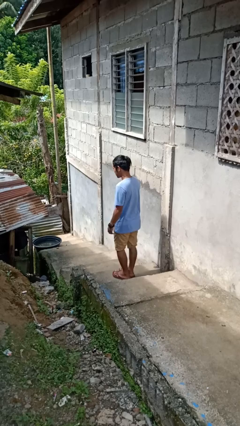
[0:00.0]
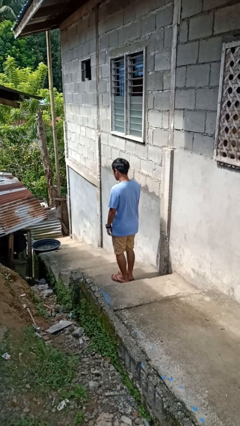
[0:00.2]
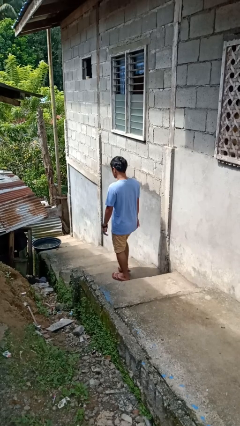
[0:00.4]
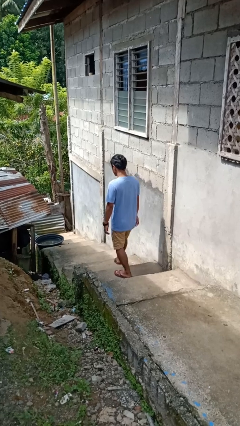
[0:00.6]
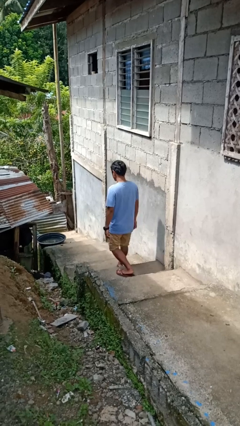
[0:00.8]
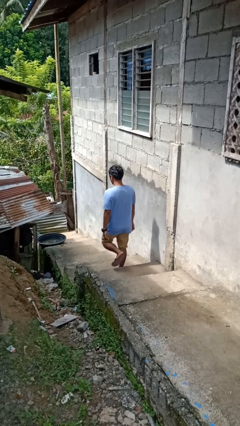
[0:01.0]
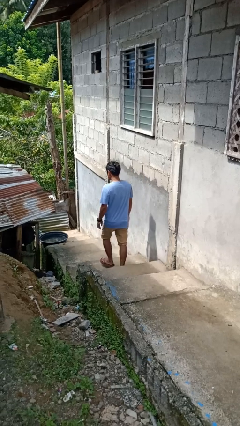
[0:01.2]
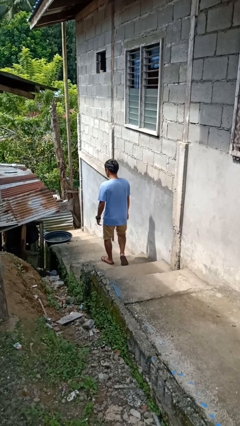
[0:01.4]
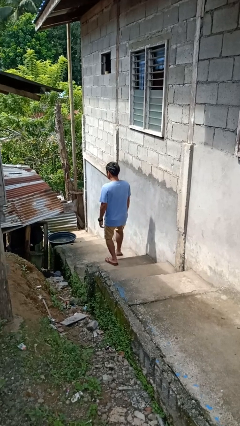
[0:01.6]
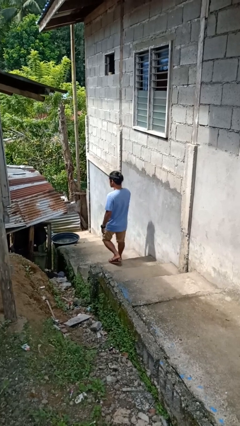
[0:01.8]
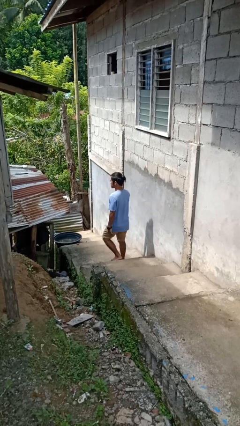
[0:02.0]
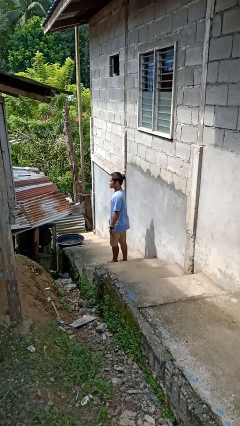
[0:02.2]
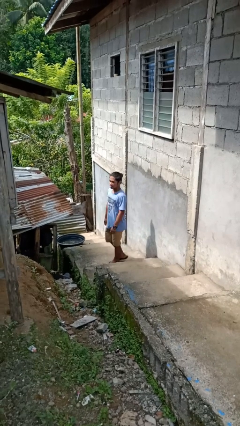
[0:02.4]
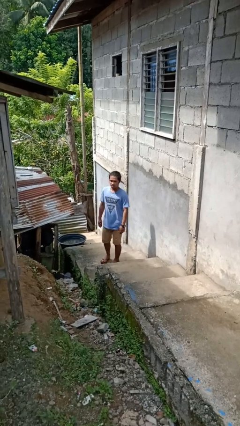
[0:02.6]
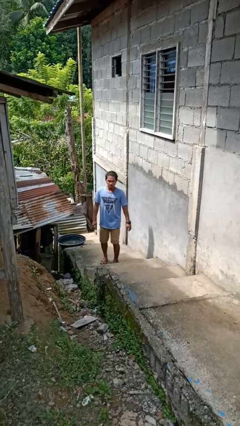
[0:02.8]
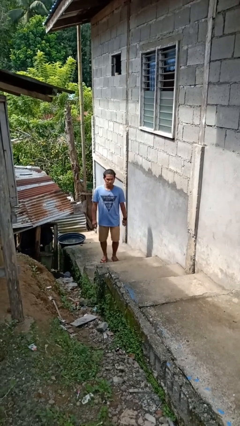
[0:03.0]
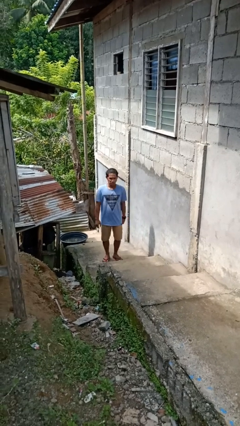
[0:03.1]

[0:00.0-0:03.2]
person climbs down stairs

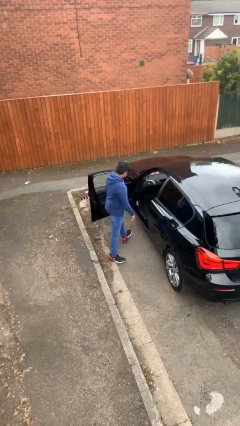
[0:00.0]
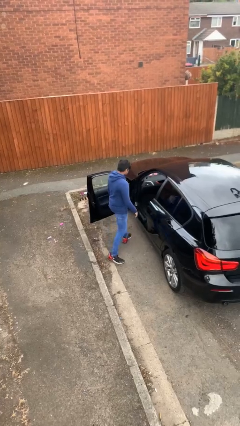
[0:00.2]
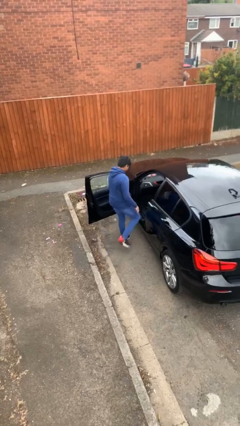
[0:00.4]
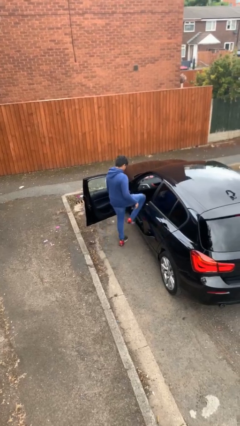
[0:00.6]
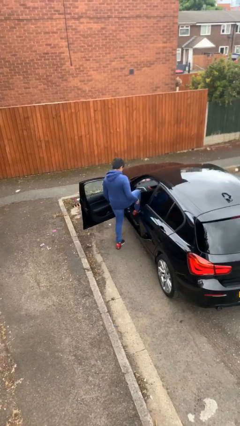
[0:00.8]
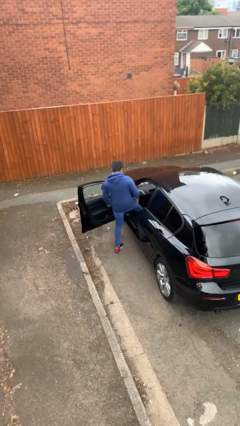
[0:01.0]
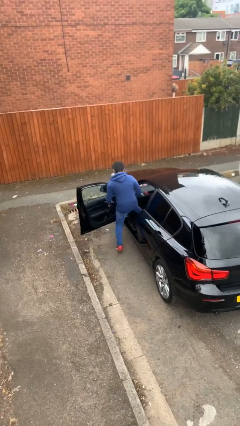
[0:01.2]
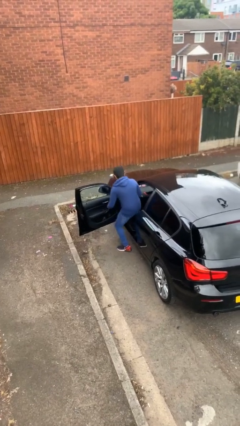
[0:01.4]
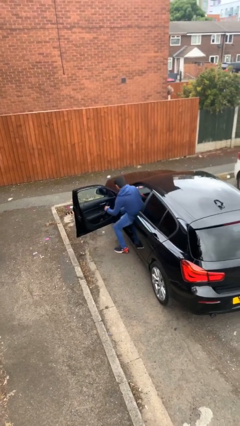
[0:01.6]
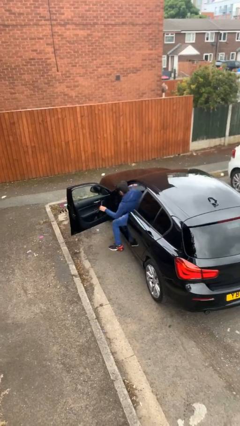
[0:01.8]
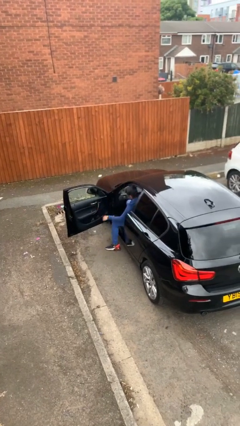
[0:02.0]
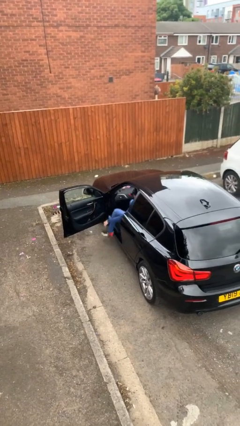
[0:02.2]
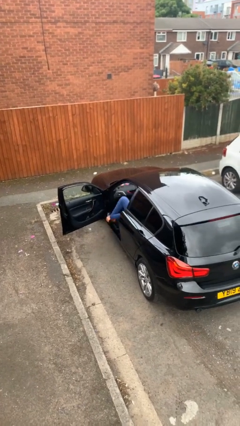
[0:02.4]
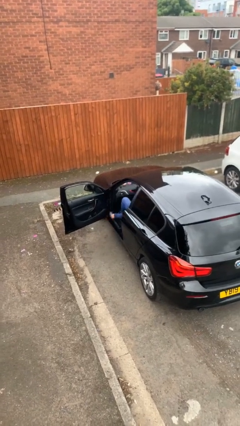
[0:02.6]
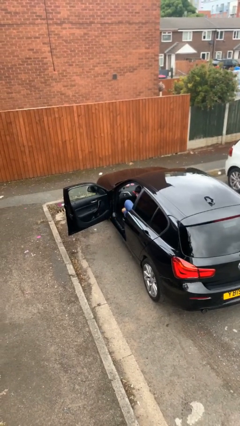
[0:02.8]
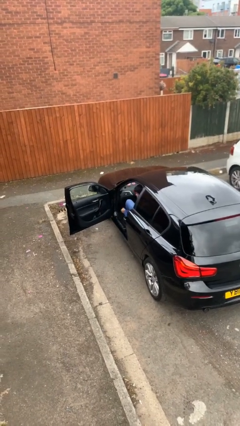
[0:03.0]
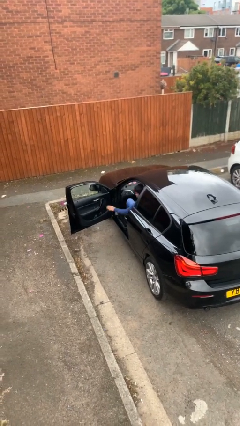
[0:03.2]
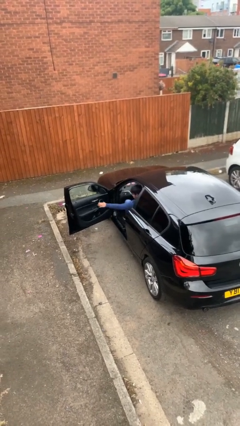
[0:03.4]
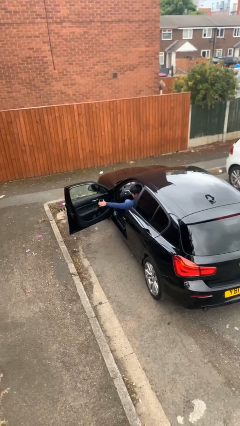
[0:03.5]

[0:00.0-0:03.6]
person enters car

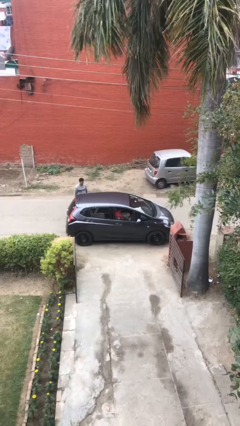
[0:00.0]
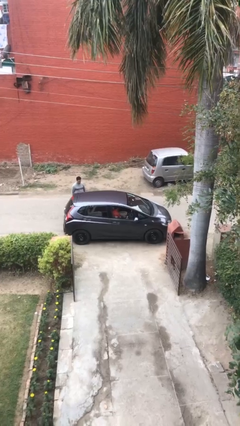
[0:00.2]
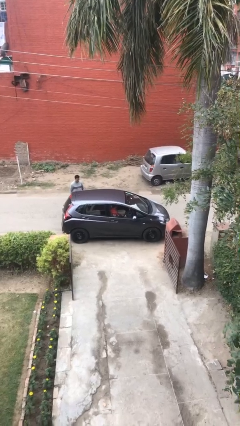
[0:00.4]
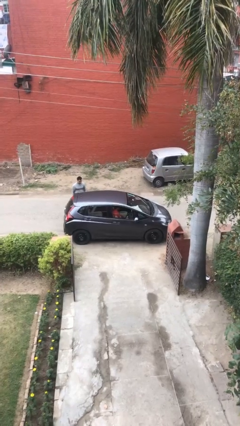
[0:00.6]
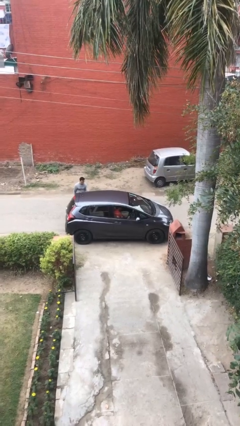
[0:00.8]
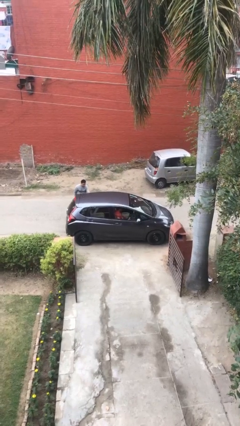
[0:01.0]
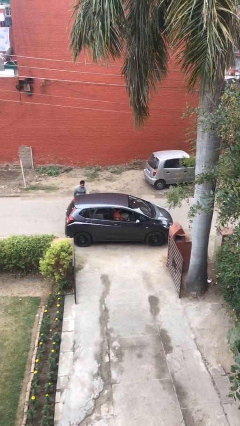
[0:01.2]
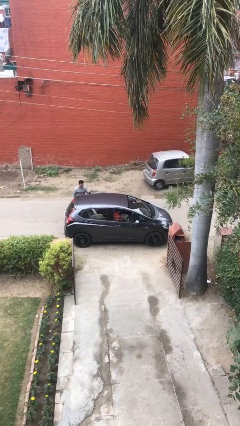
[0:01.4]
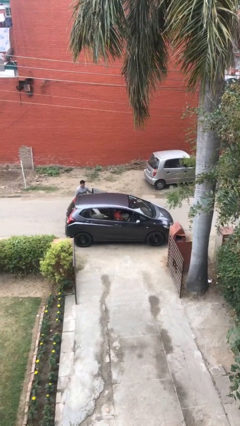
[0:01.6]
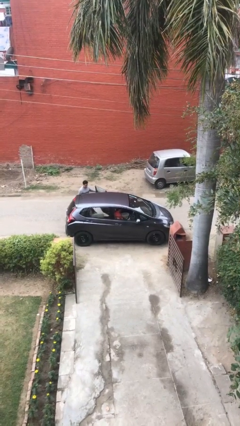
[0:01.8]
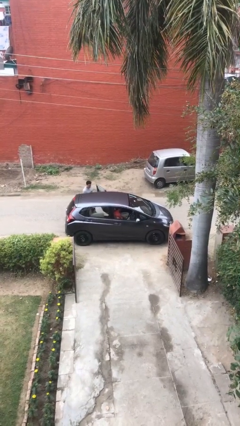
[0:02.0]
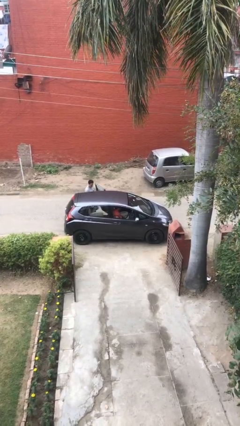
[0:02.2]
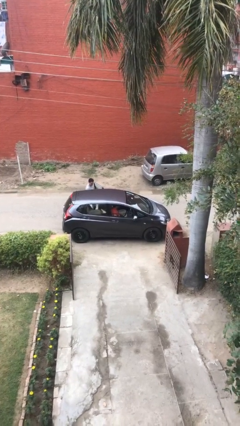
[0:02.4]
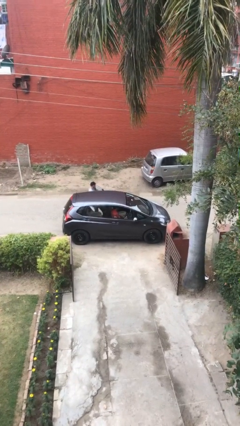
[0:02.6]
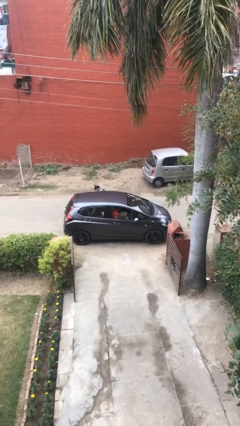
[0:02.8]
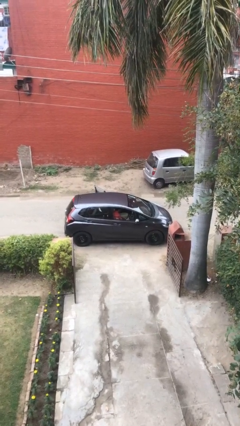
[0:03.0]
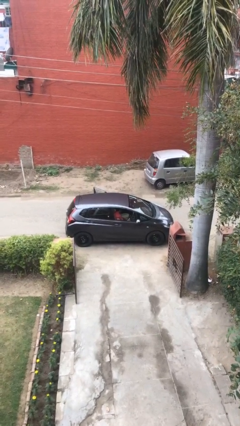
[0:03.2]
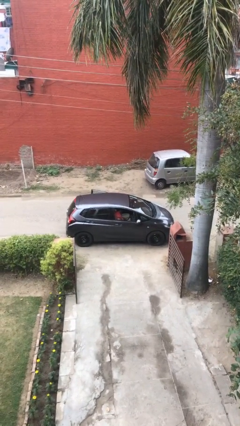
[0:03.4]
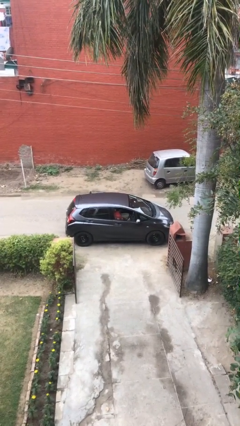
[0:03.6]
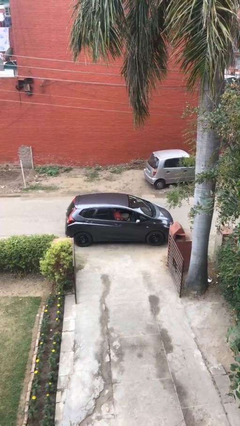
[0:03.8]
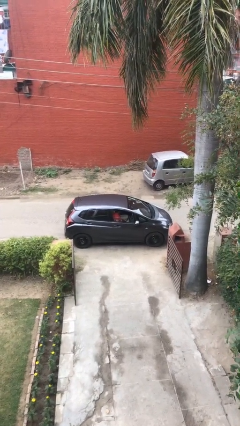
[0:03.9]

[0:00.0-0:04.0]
car picks up person

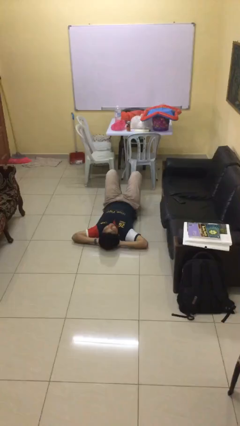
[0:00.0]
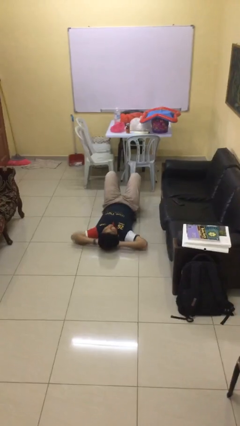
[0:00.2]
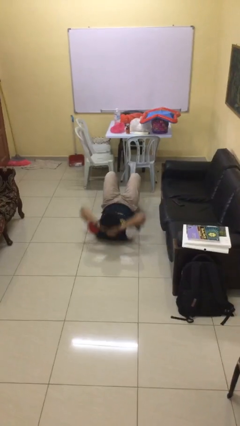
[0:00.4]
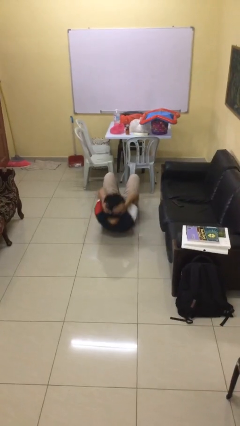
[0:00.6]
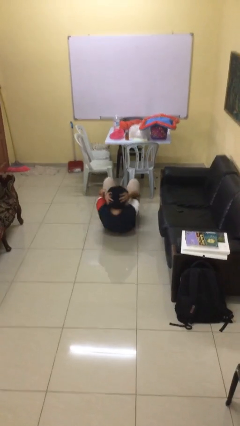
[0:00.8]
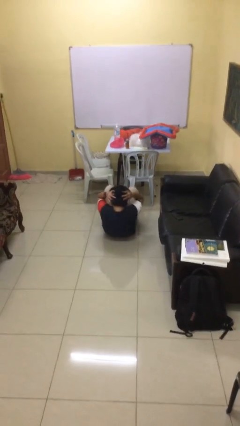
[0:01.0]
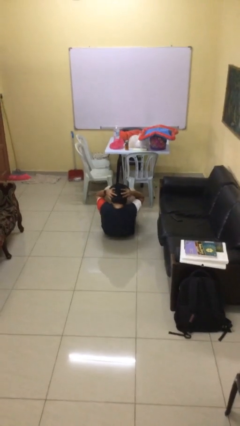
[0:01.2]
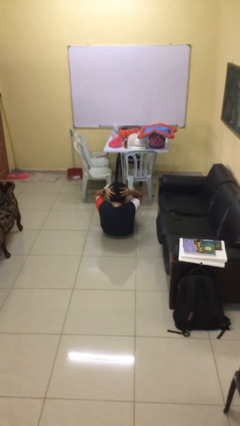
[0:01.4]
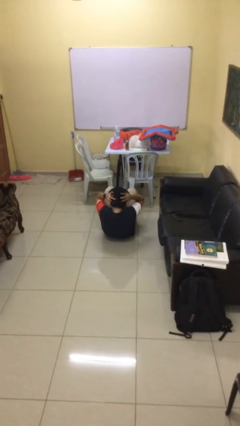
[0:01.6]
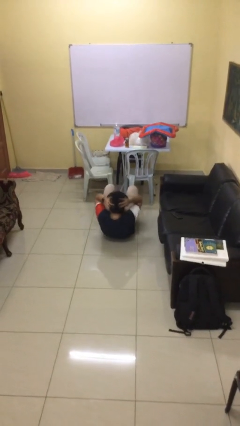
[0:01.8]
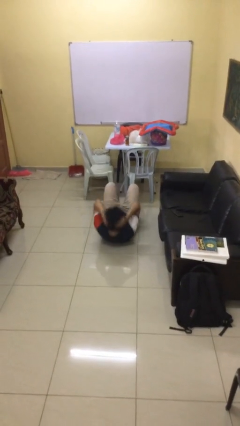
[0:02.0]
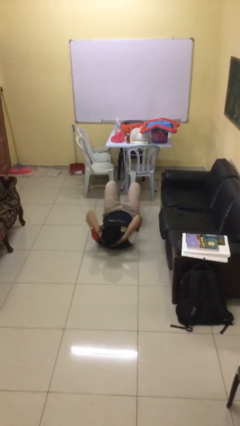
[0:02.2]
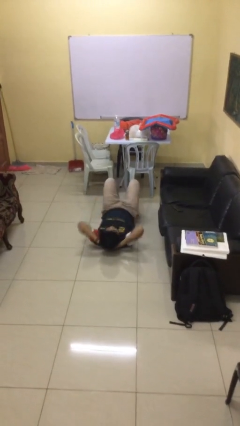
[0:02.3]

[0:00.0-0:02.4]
person exercises with situp

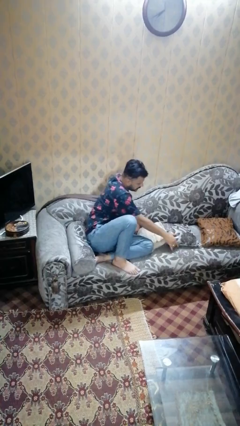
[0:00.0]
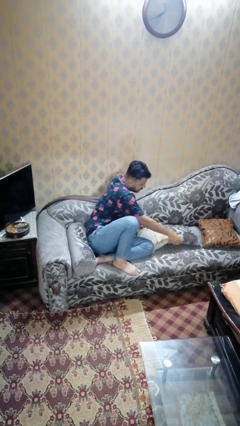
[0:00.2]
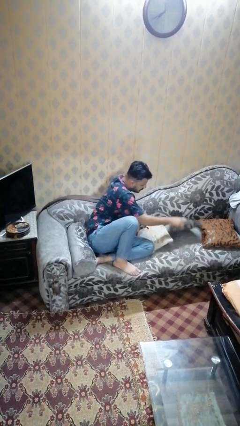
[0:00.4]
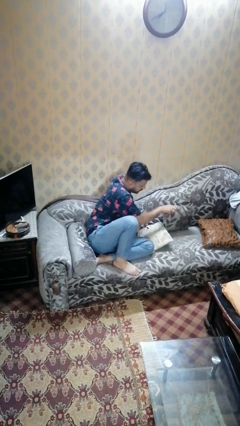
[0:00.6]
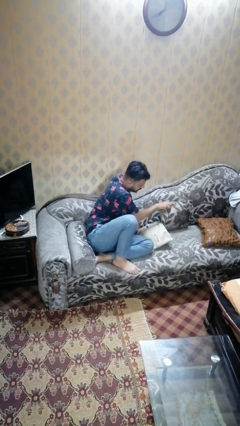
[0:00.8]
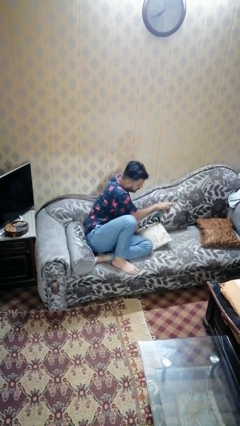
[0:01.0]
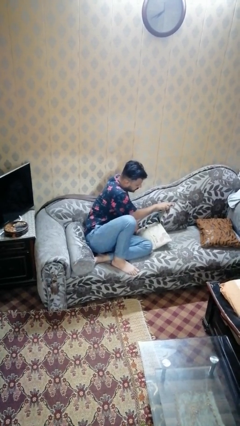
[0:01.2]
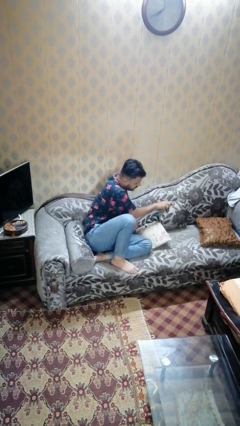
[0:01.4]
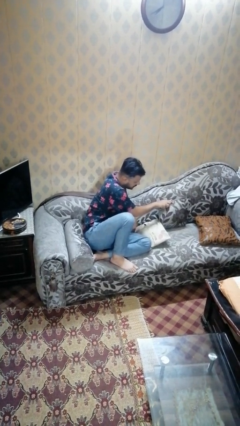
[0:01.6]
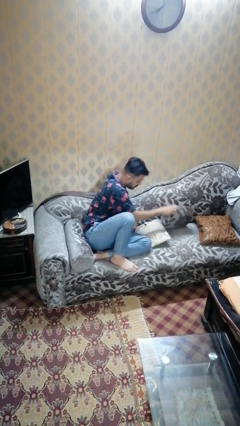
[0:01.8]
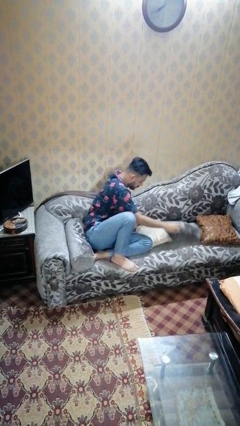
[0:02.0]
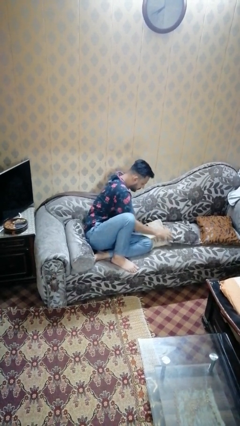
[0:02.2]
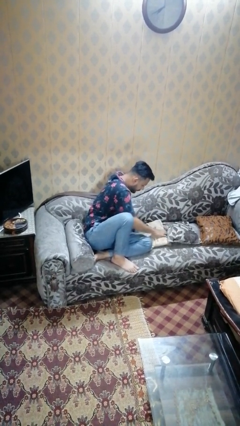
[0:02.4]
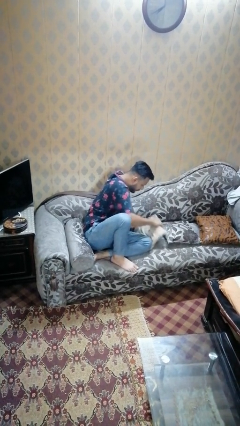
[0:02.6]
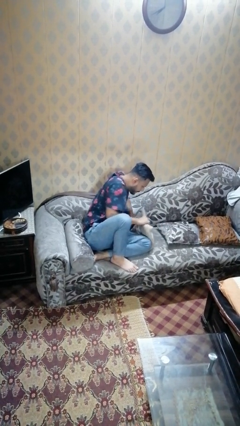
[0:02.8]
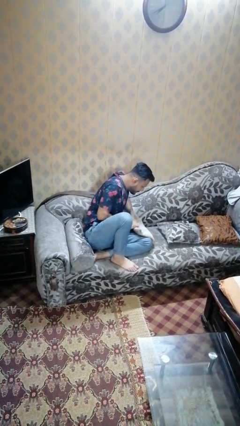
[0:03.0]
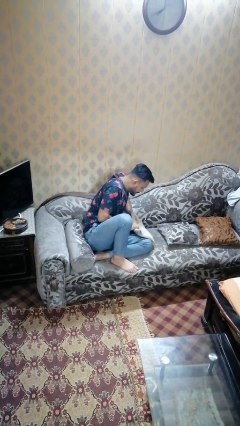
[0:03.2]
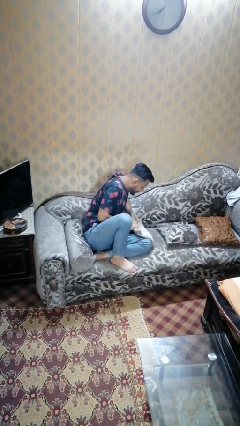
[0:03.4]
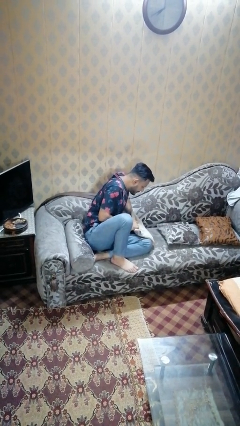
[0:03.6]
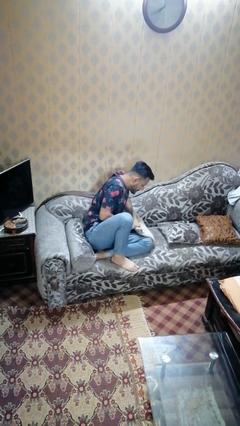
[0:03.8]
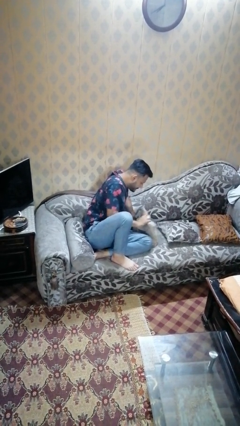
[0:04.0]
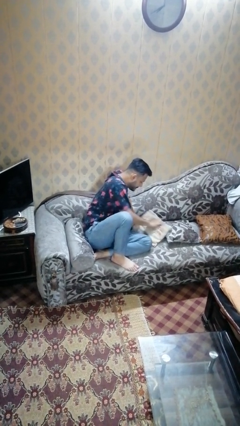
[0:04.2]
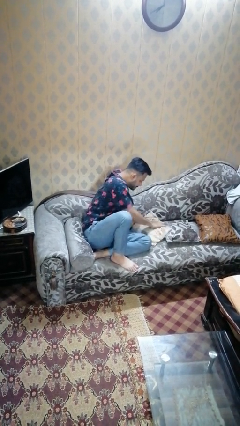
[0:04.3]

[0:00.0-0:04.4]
person searches in couch

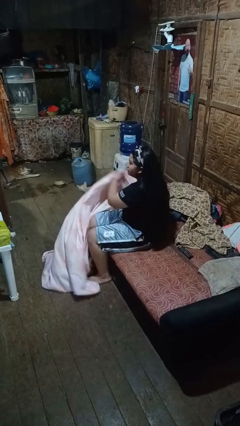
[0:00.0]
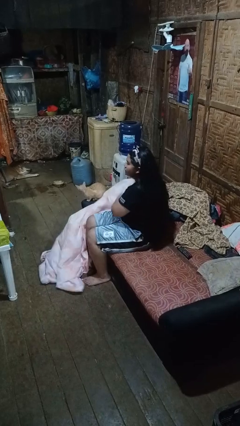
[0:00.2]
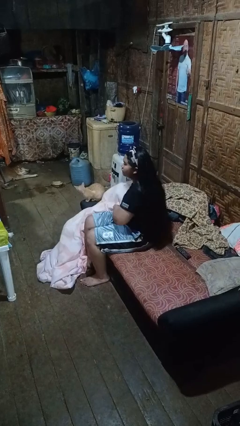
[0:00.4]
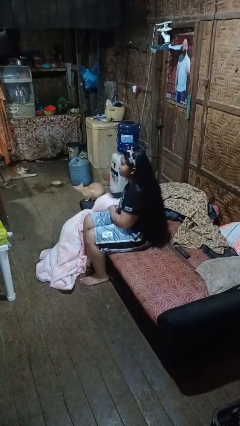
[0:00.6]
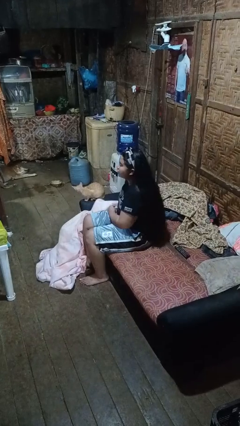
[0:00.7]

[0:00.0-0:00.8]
person uncovers with blanket
